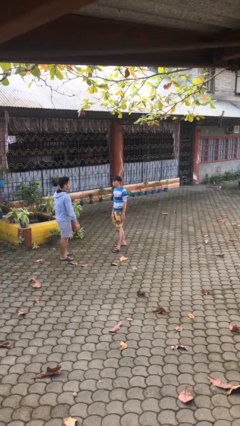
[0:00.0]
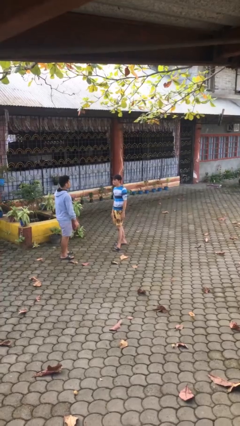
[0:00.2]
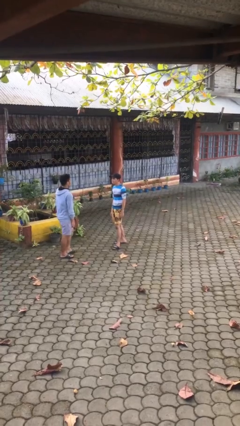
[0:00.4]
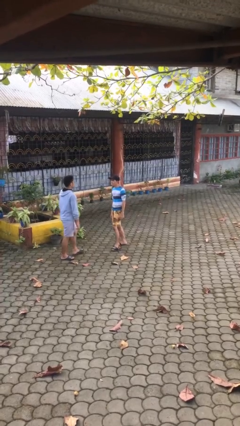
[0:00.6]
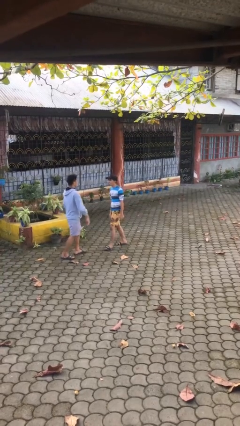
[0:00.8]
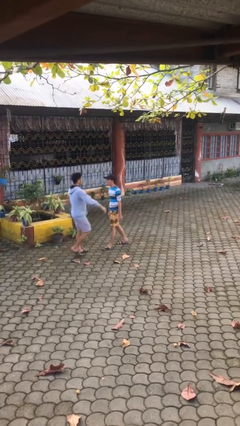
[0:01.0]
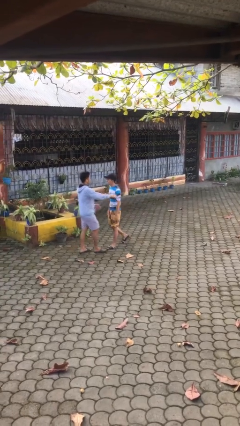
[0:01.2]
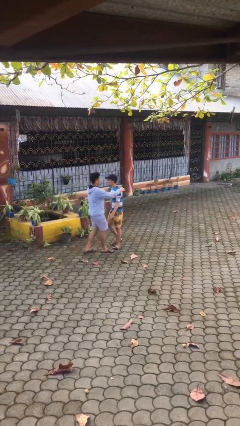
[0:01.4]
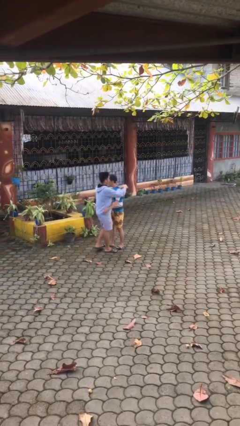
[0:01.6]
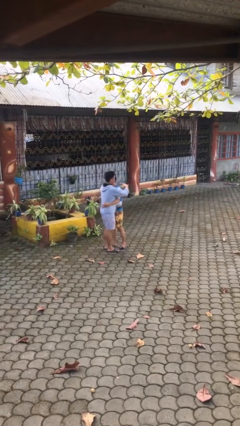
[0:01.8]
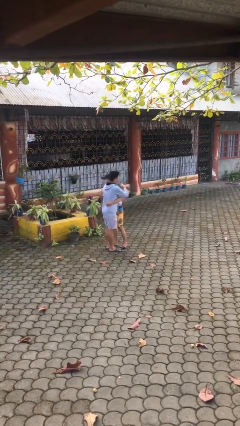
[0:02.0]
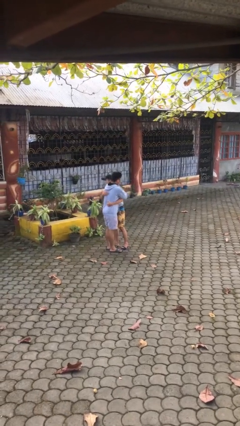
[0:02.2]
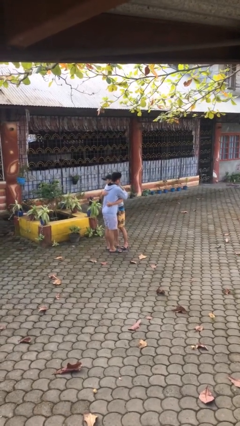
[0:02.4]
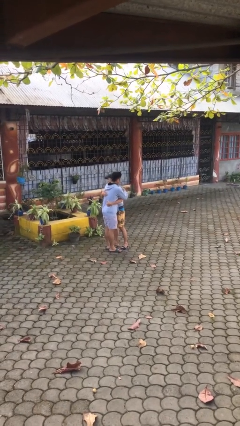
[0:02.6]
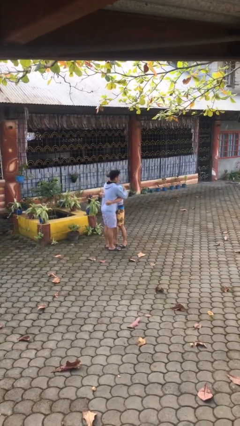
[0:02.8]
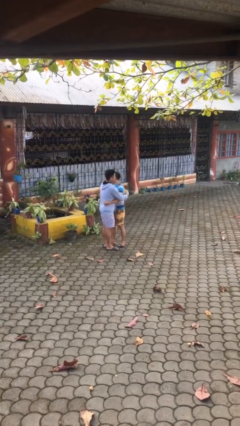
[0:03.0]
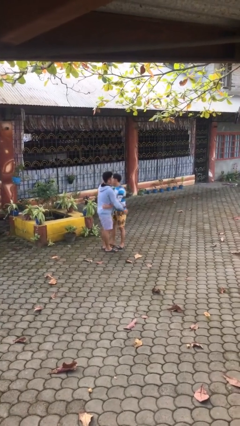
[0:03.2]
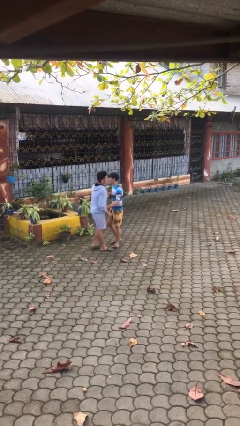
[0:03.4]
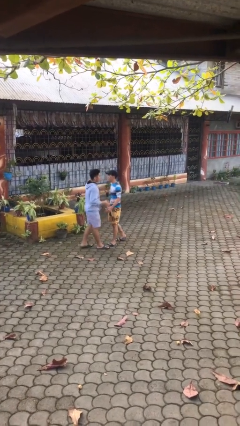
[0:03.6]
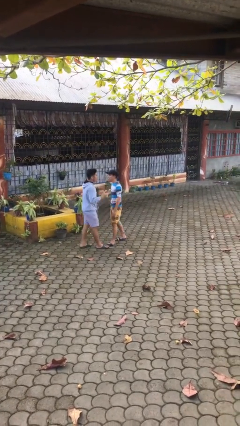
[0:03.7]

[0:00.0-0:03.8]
person embraces person

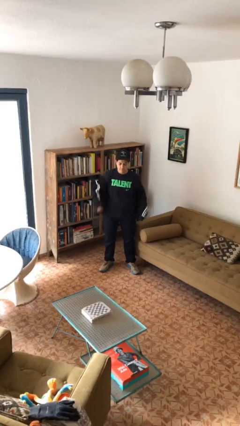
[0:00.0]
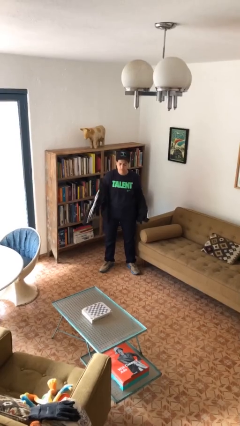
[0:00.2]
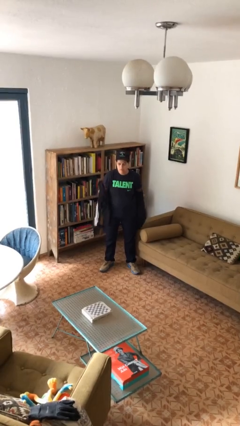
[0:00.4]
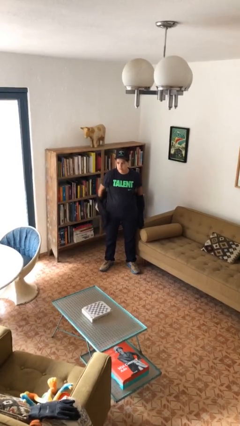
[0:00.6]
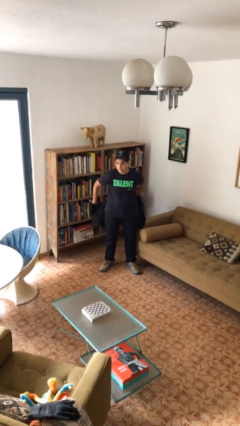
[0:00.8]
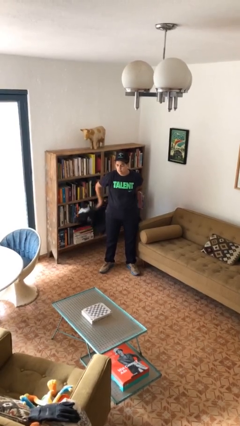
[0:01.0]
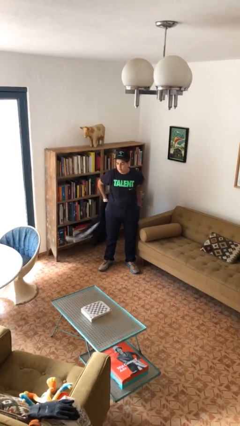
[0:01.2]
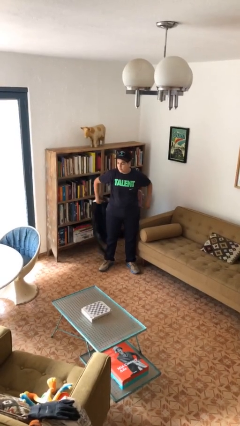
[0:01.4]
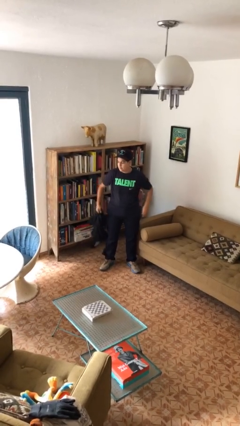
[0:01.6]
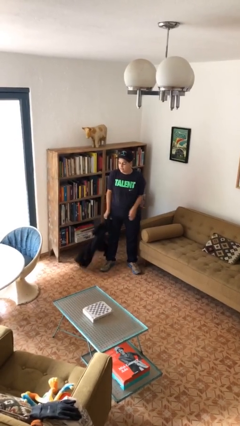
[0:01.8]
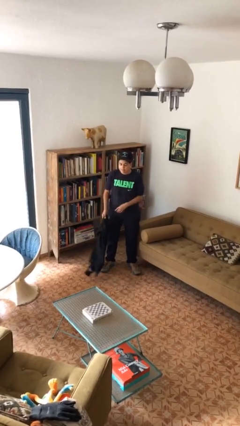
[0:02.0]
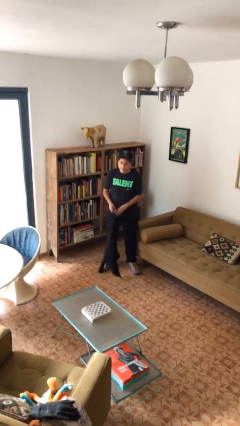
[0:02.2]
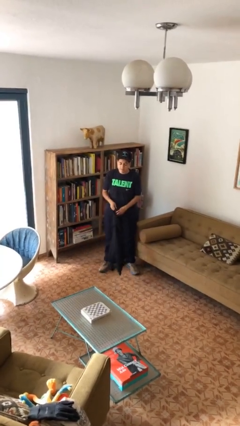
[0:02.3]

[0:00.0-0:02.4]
person takes off jacket

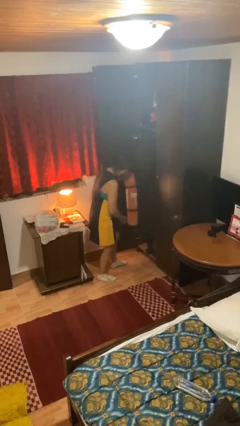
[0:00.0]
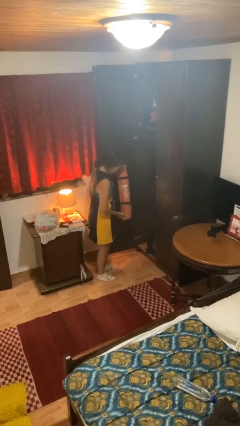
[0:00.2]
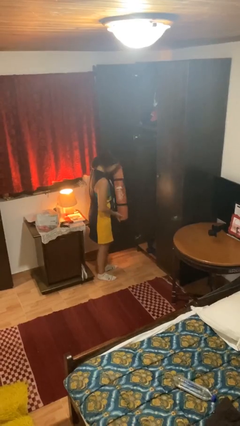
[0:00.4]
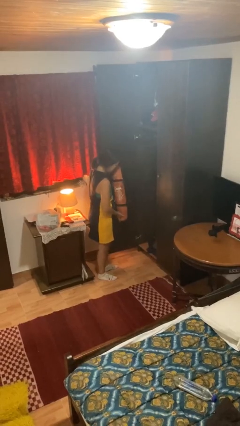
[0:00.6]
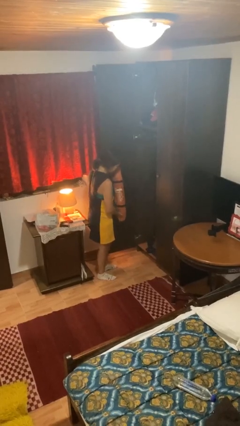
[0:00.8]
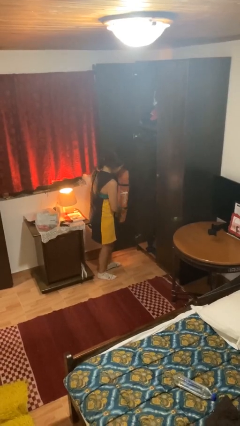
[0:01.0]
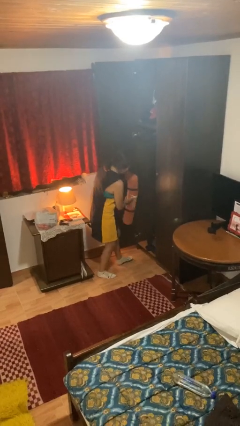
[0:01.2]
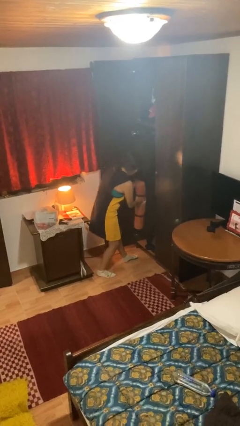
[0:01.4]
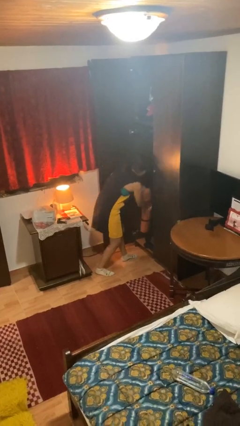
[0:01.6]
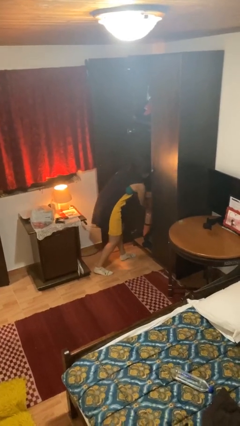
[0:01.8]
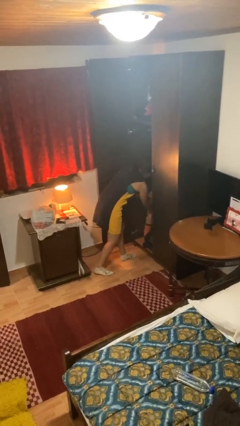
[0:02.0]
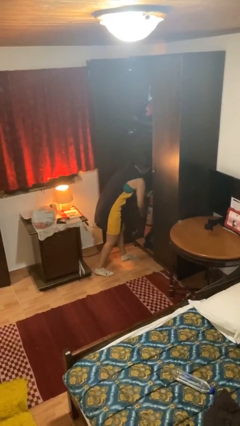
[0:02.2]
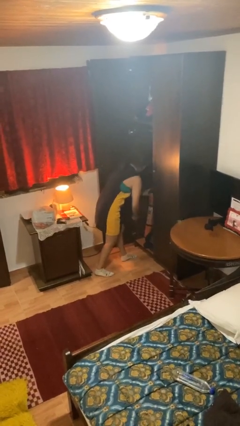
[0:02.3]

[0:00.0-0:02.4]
person puts down object into cabinet

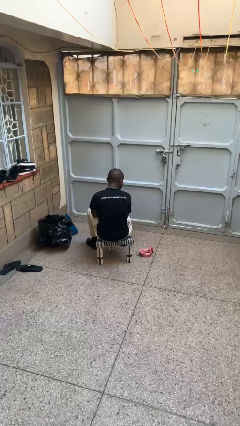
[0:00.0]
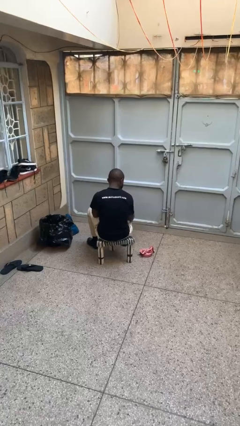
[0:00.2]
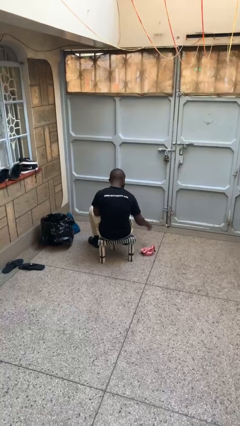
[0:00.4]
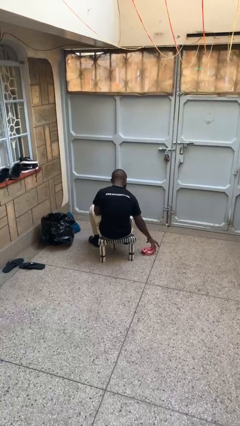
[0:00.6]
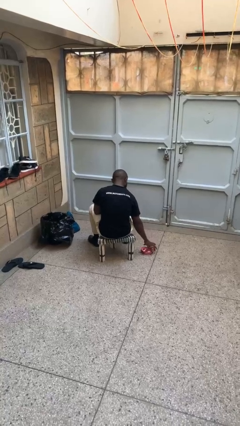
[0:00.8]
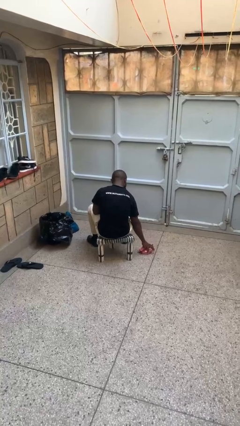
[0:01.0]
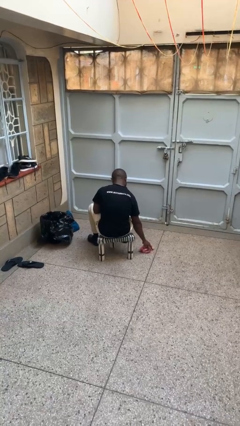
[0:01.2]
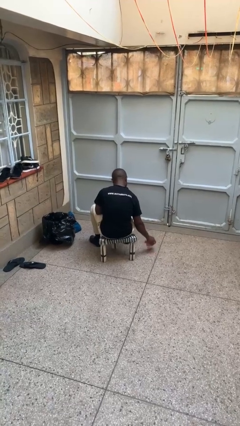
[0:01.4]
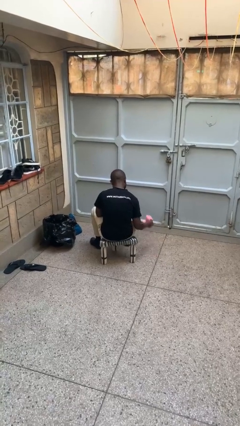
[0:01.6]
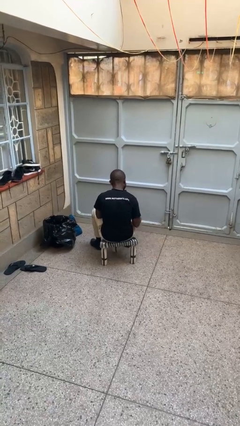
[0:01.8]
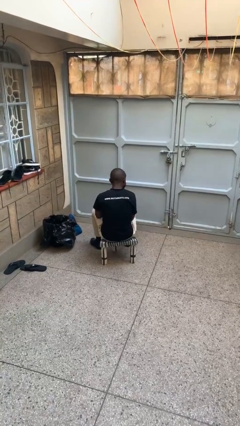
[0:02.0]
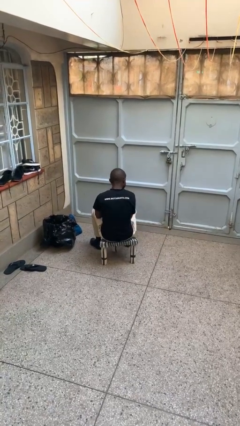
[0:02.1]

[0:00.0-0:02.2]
person picks up object from table

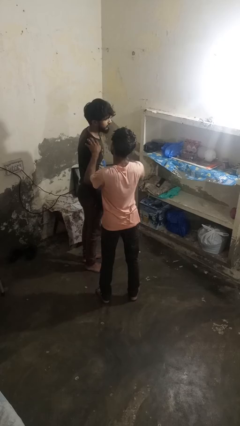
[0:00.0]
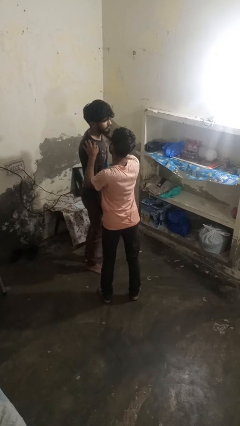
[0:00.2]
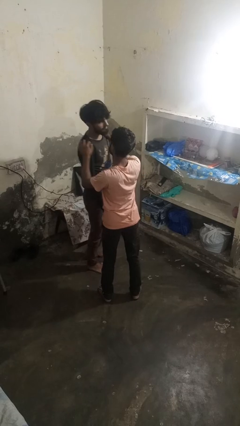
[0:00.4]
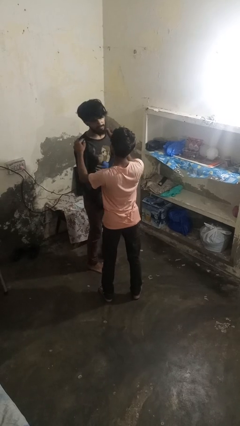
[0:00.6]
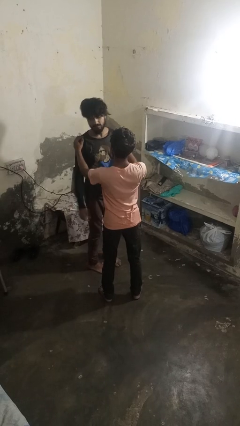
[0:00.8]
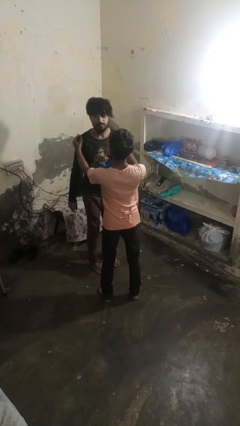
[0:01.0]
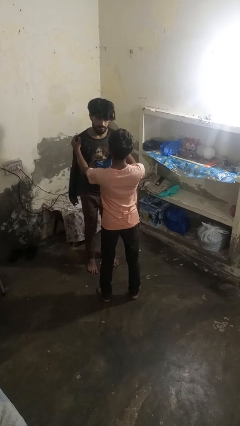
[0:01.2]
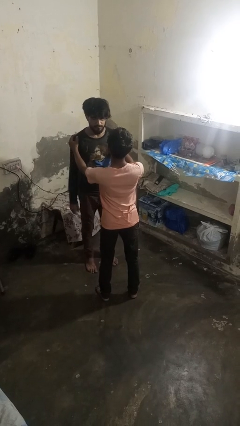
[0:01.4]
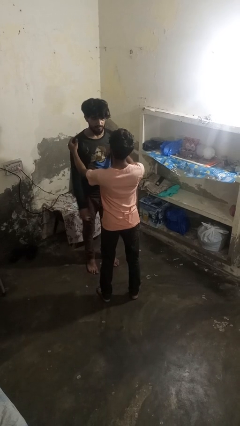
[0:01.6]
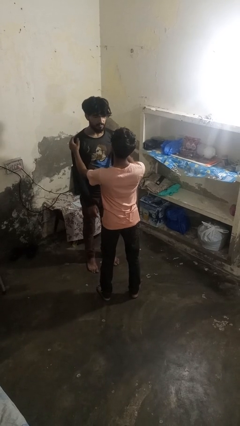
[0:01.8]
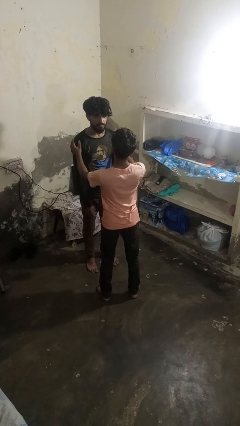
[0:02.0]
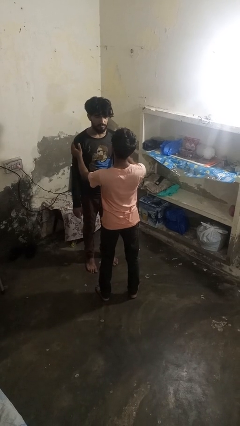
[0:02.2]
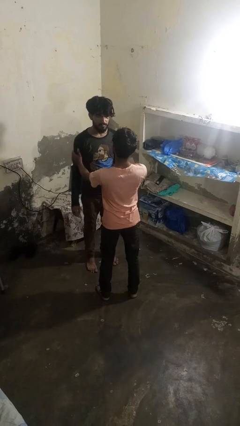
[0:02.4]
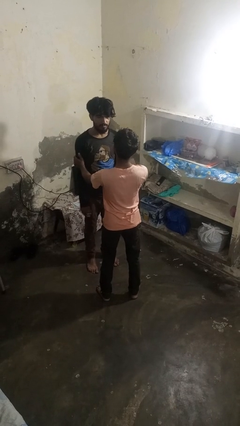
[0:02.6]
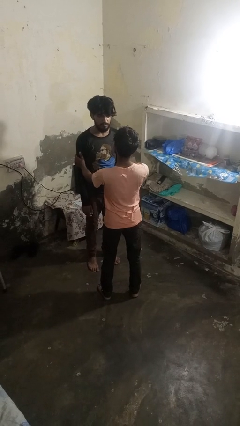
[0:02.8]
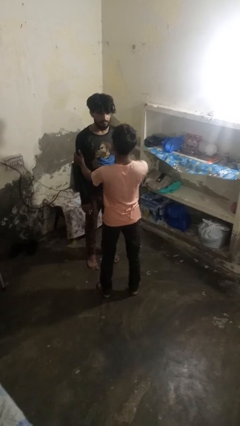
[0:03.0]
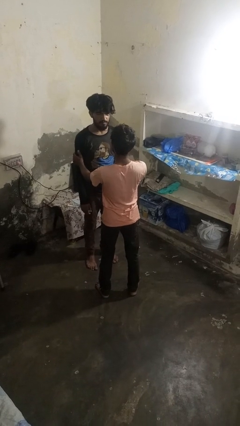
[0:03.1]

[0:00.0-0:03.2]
person spins person around

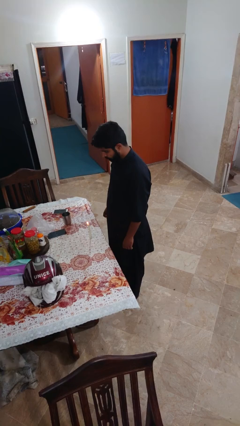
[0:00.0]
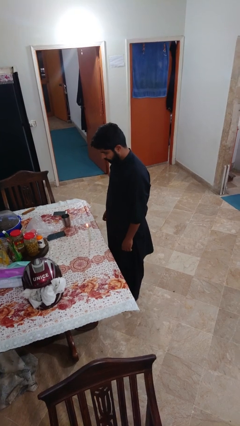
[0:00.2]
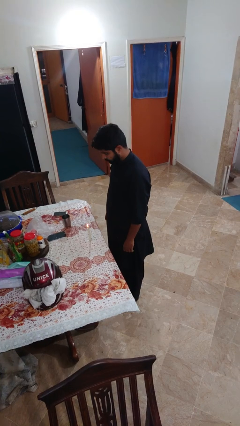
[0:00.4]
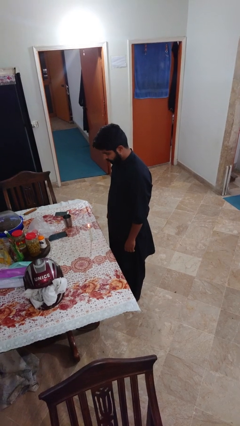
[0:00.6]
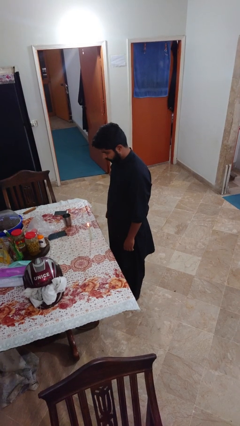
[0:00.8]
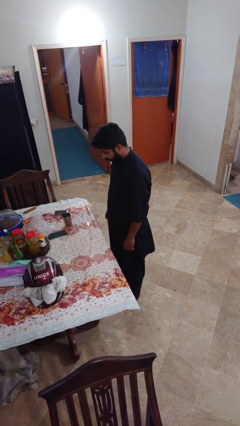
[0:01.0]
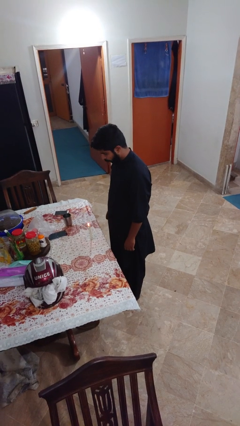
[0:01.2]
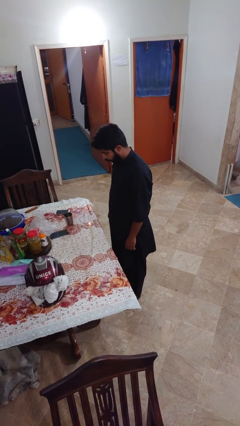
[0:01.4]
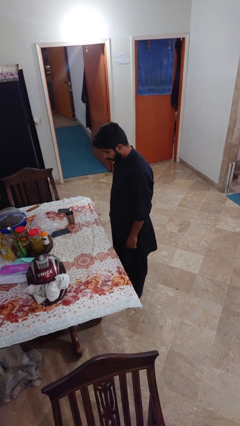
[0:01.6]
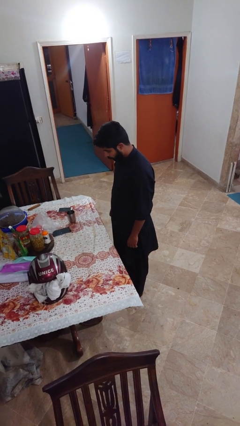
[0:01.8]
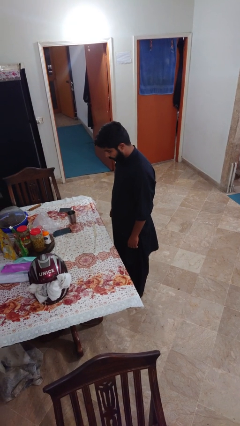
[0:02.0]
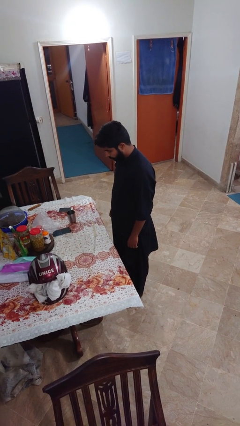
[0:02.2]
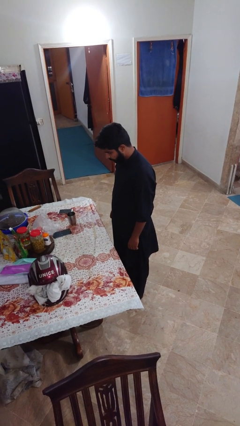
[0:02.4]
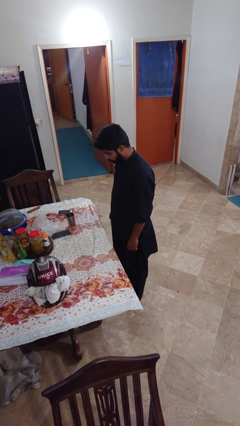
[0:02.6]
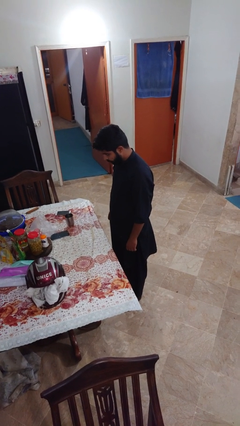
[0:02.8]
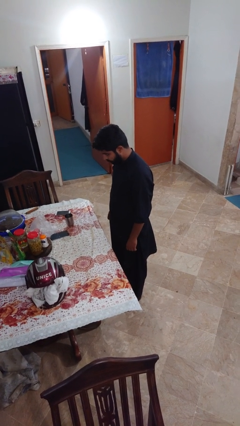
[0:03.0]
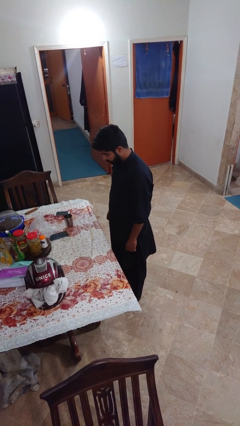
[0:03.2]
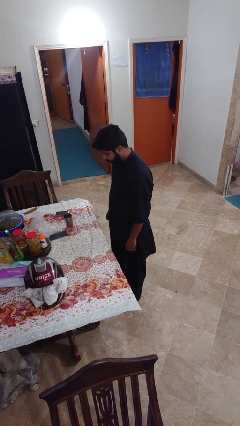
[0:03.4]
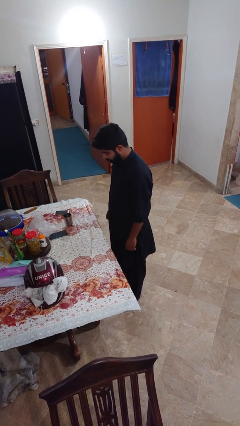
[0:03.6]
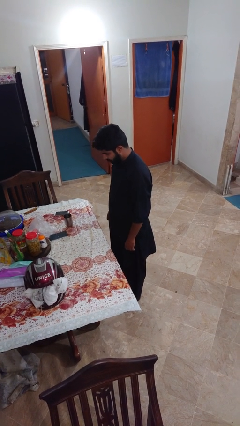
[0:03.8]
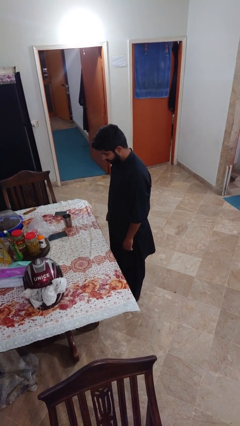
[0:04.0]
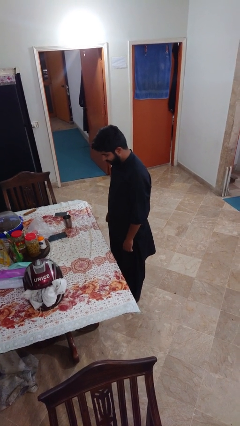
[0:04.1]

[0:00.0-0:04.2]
person extinguishes candle
